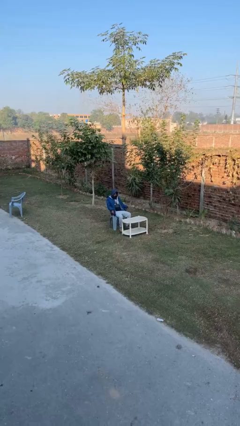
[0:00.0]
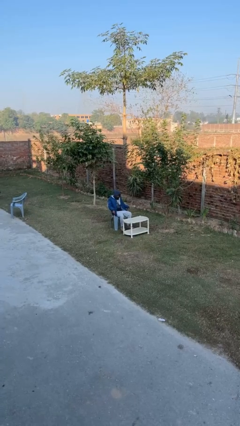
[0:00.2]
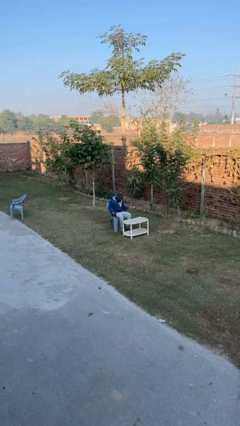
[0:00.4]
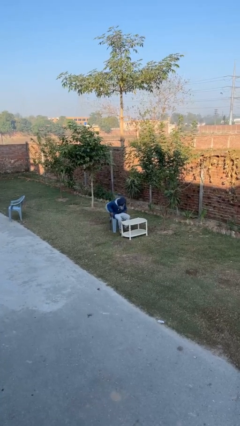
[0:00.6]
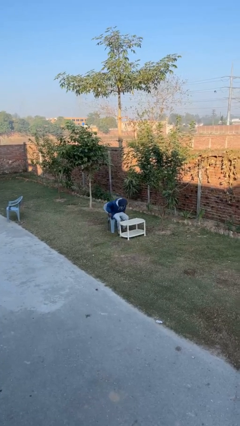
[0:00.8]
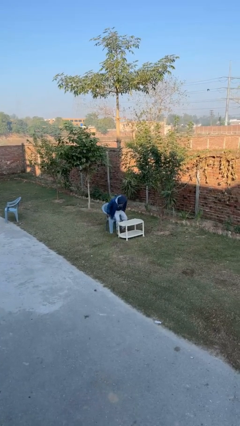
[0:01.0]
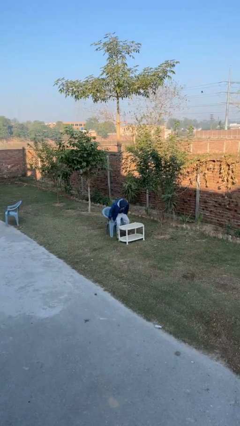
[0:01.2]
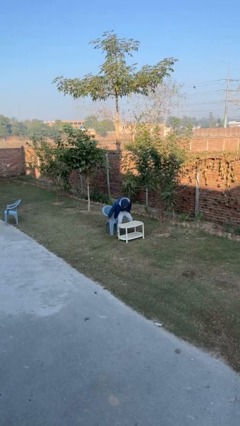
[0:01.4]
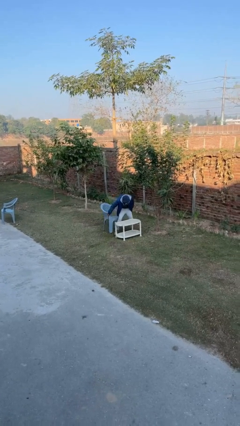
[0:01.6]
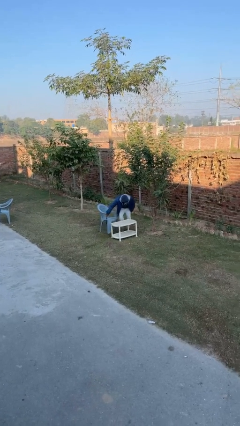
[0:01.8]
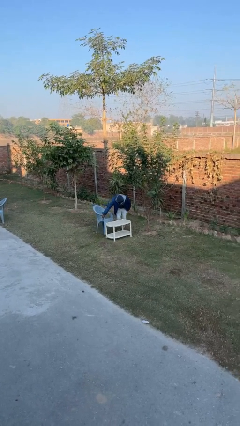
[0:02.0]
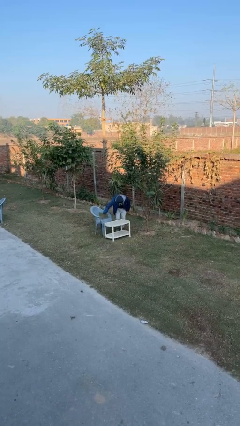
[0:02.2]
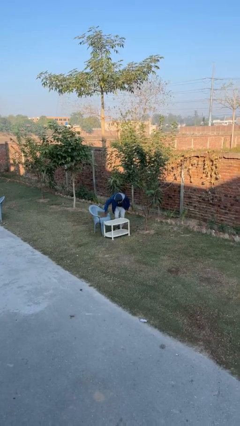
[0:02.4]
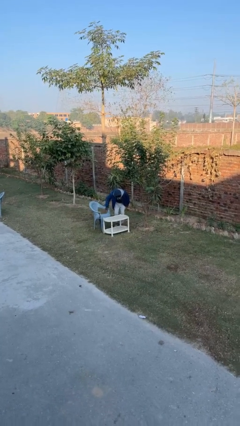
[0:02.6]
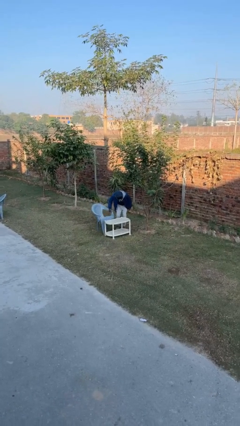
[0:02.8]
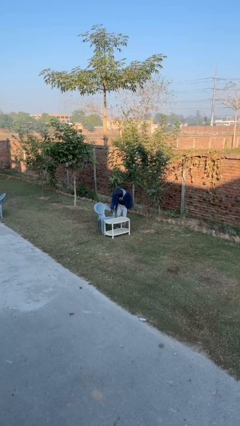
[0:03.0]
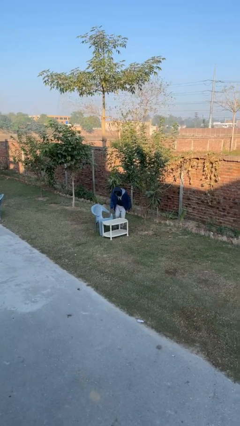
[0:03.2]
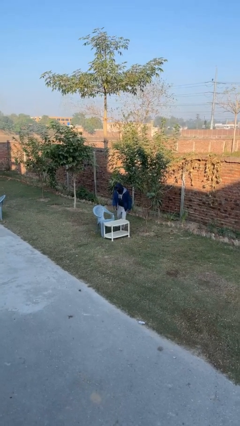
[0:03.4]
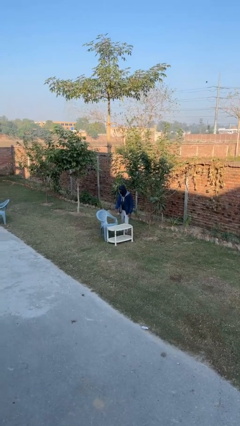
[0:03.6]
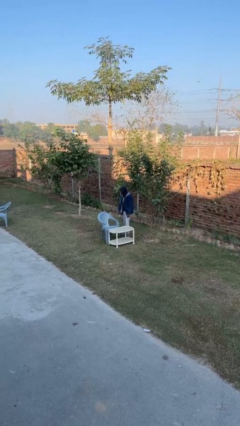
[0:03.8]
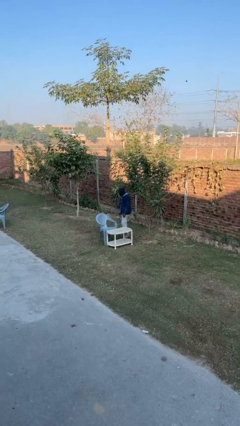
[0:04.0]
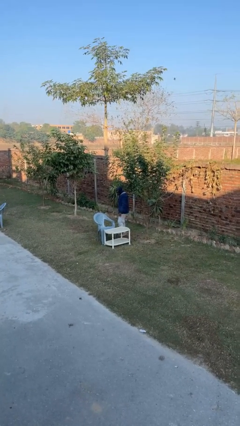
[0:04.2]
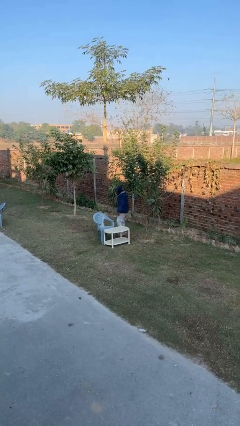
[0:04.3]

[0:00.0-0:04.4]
person stands up

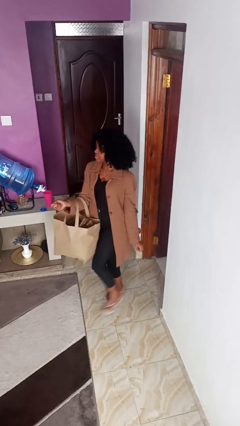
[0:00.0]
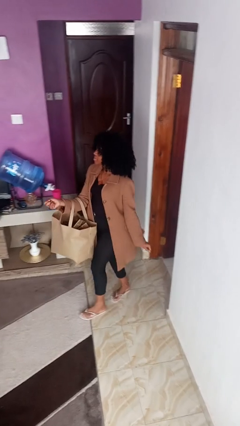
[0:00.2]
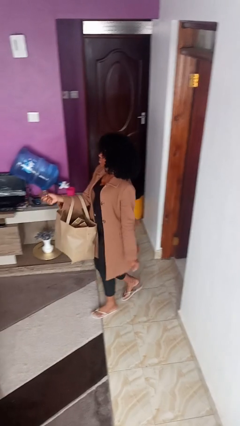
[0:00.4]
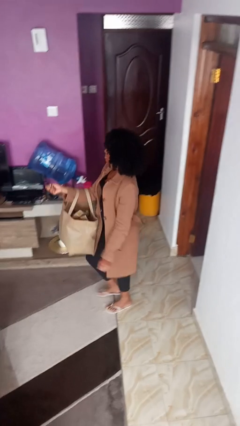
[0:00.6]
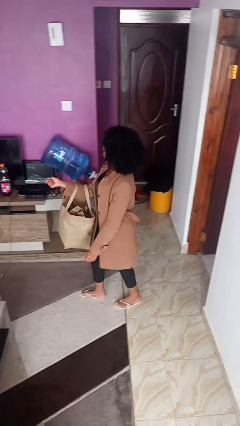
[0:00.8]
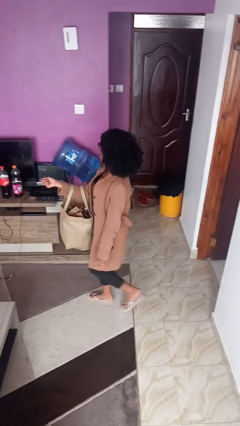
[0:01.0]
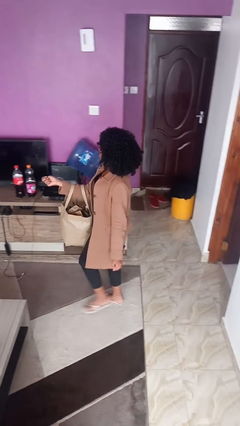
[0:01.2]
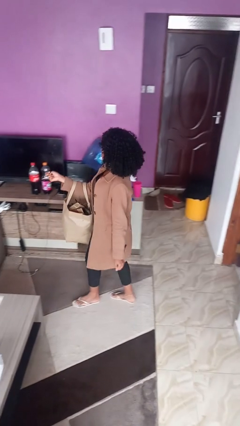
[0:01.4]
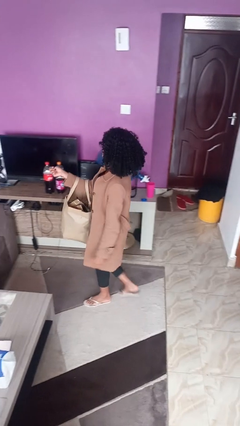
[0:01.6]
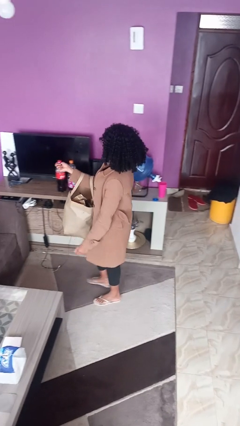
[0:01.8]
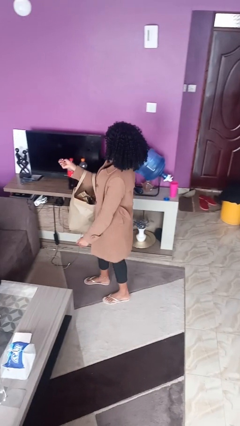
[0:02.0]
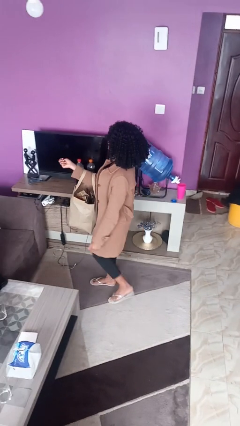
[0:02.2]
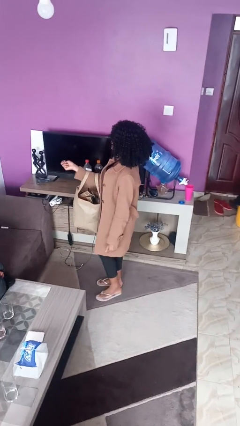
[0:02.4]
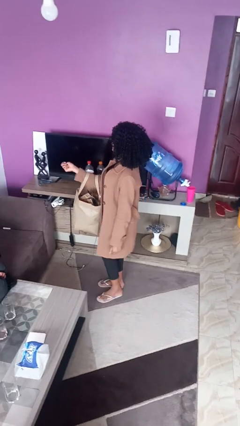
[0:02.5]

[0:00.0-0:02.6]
person carries groceries

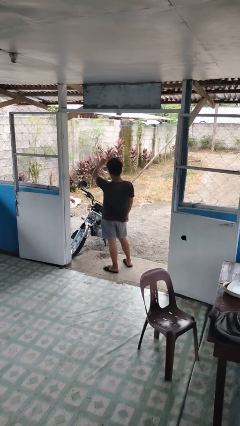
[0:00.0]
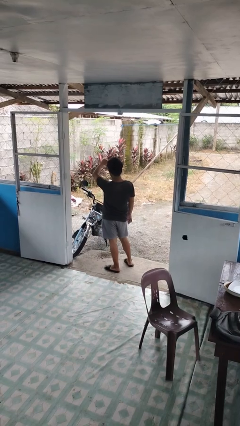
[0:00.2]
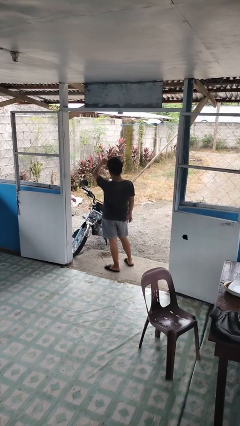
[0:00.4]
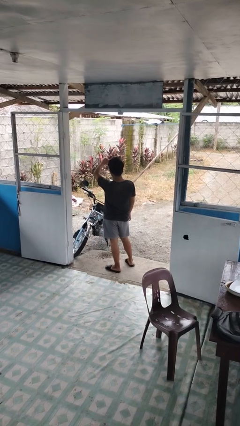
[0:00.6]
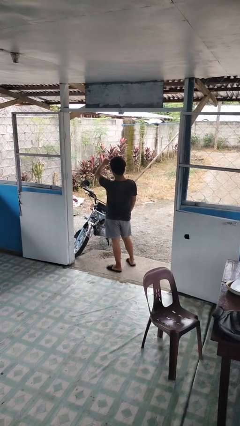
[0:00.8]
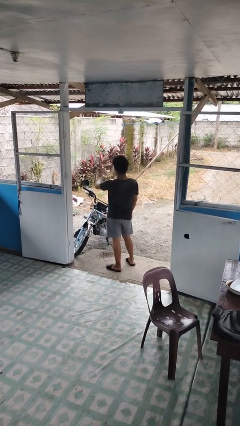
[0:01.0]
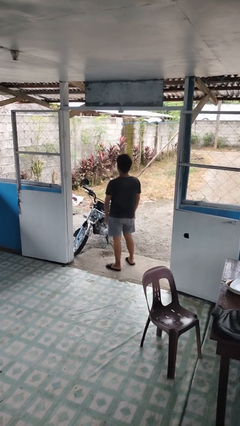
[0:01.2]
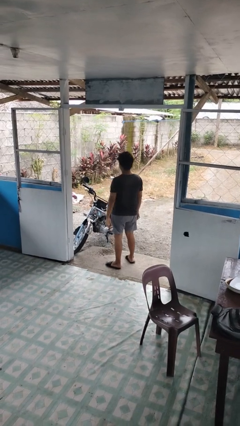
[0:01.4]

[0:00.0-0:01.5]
person gestures thumbs down

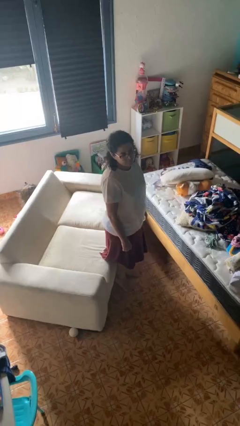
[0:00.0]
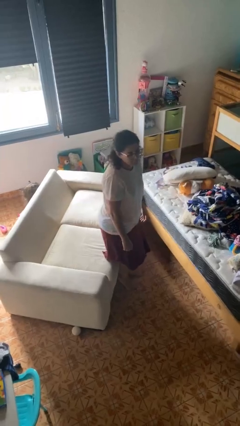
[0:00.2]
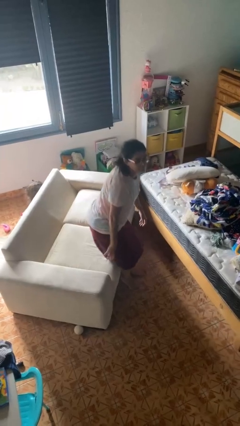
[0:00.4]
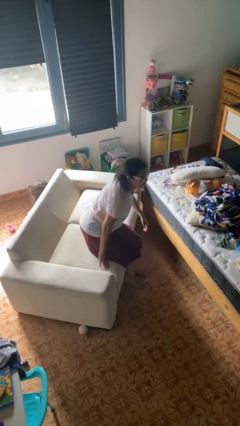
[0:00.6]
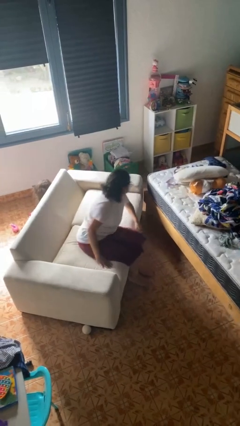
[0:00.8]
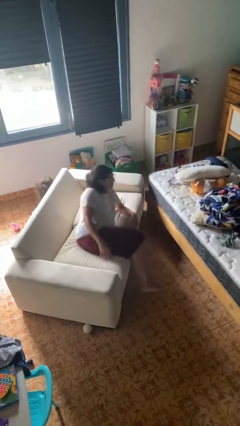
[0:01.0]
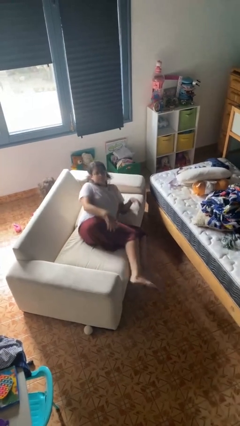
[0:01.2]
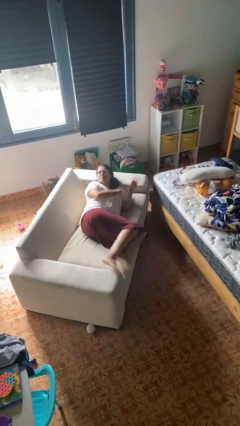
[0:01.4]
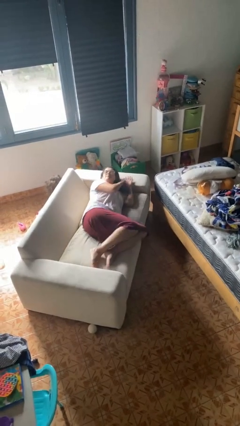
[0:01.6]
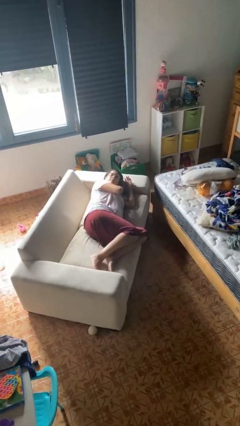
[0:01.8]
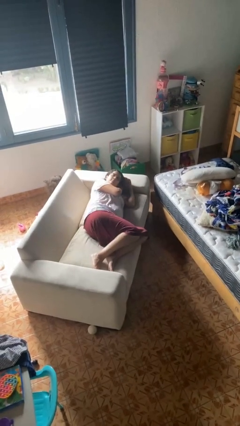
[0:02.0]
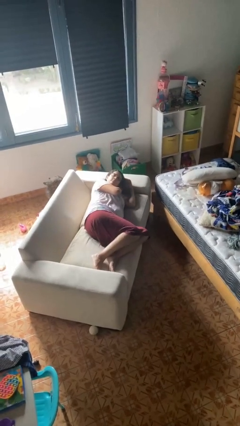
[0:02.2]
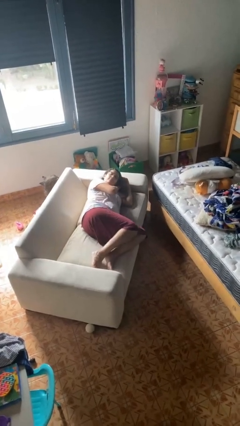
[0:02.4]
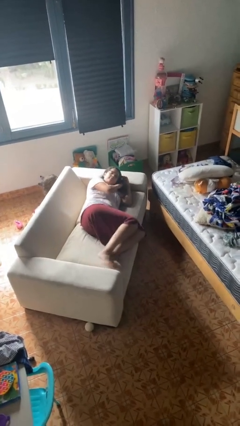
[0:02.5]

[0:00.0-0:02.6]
person lies down on couch

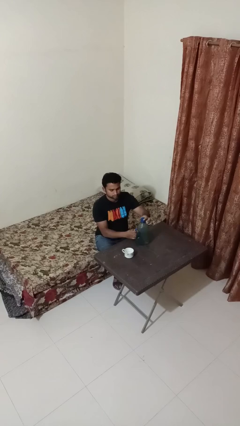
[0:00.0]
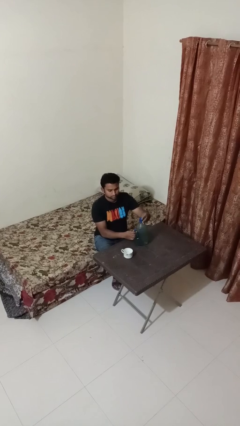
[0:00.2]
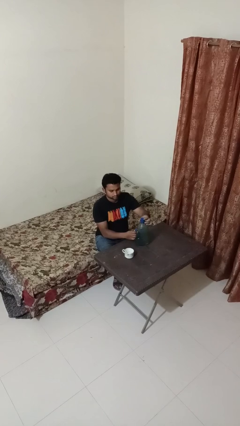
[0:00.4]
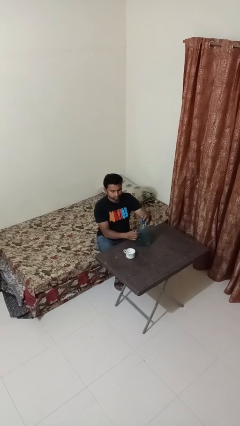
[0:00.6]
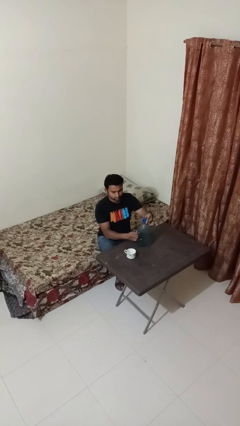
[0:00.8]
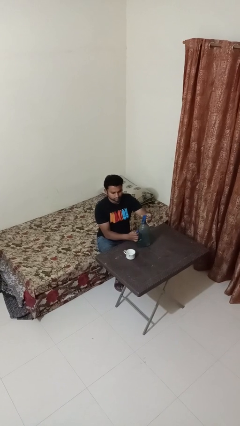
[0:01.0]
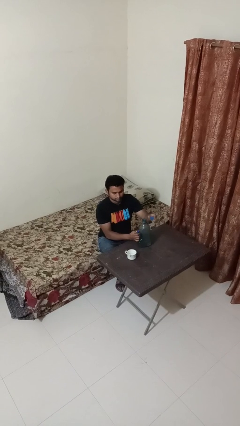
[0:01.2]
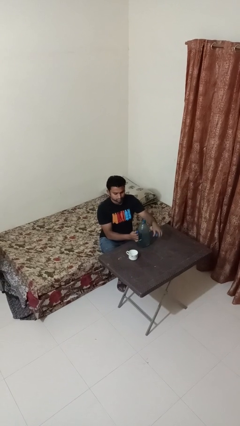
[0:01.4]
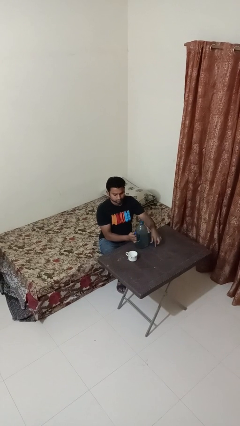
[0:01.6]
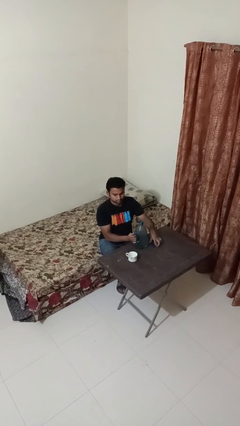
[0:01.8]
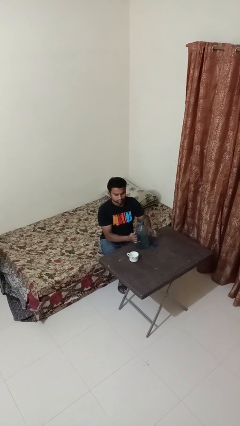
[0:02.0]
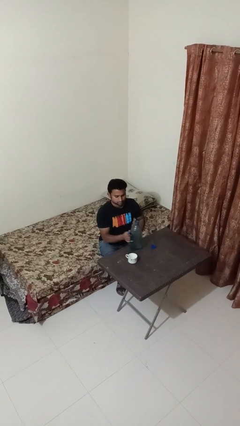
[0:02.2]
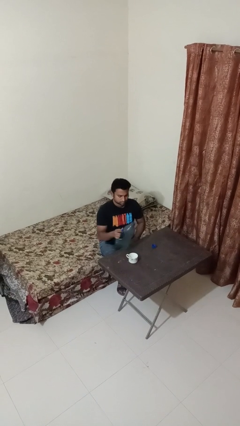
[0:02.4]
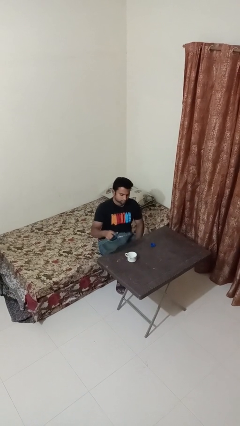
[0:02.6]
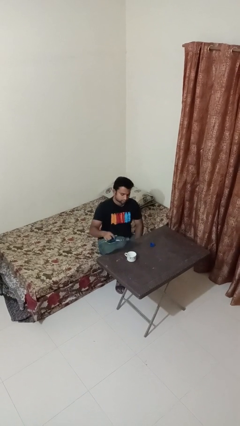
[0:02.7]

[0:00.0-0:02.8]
person unscrews lid from bottle

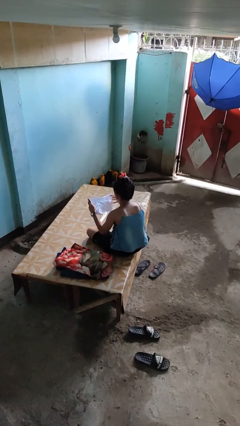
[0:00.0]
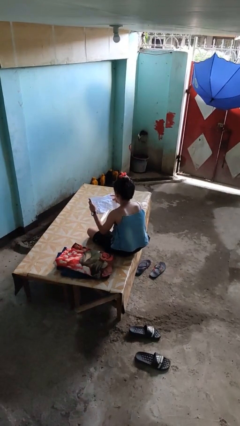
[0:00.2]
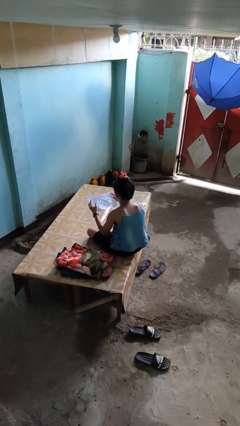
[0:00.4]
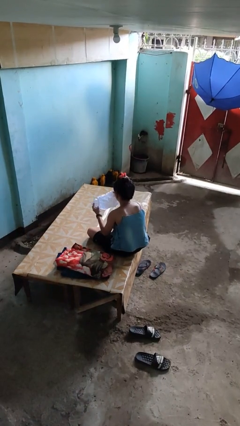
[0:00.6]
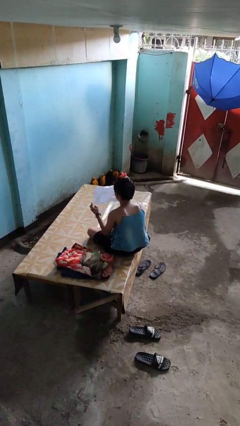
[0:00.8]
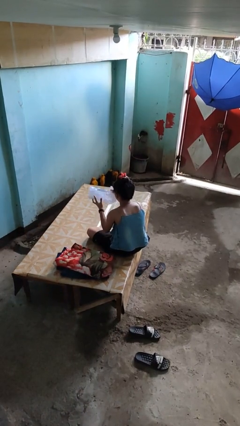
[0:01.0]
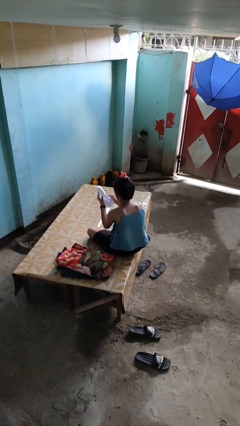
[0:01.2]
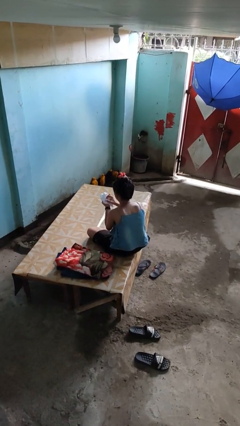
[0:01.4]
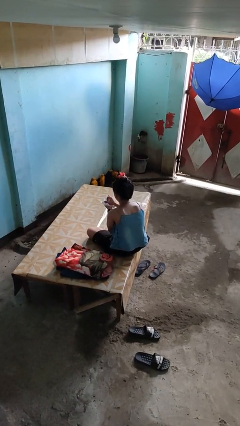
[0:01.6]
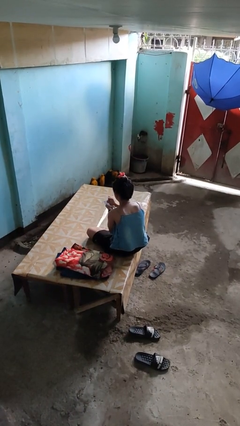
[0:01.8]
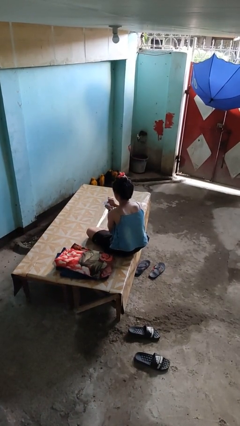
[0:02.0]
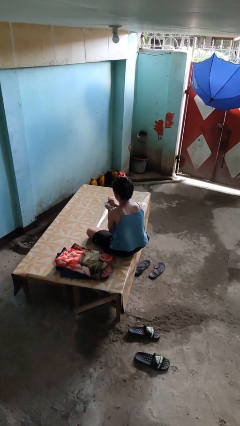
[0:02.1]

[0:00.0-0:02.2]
person crumples paper

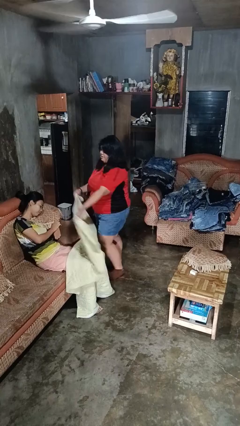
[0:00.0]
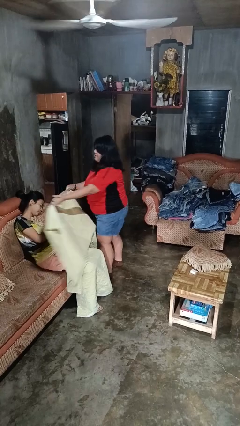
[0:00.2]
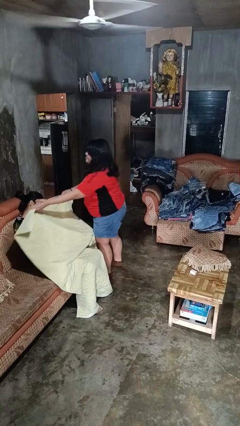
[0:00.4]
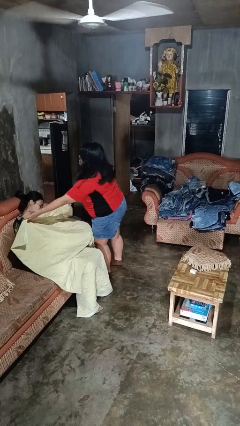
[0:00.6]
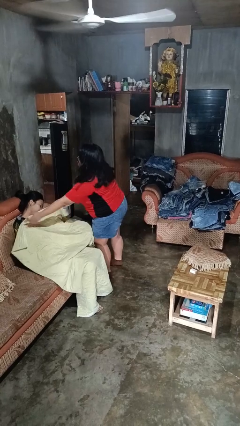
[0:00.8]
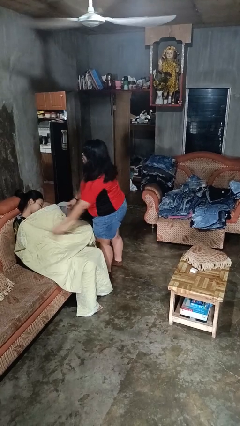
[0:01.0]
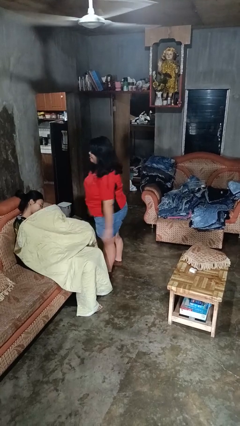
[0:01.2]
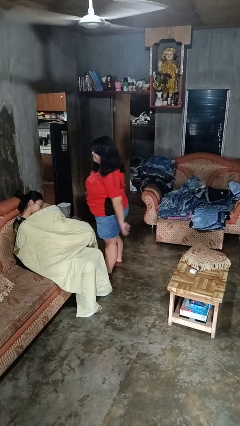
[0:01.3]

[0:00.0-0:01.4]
person covers friend with blanket
